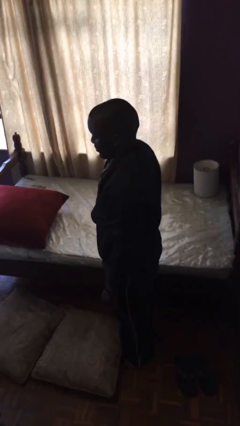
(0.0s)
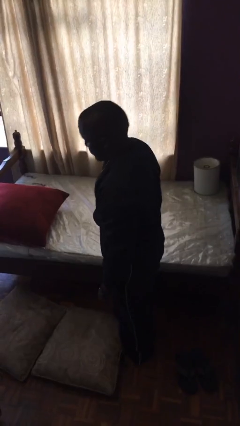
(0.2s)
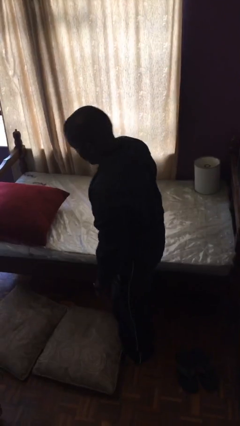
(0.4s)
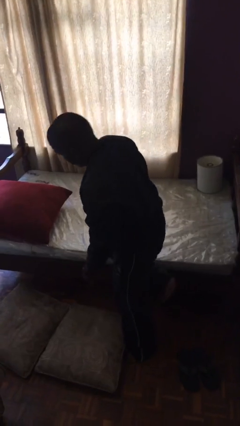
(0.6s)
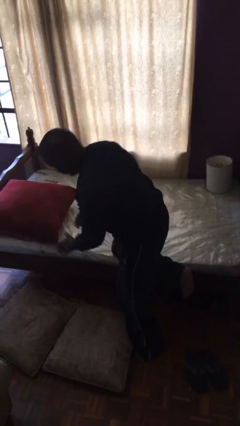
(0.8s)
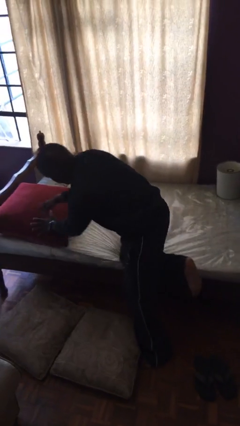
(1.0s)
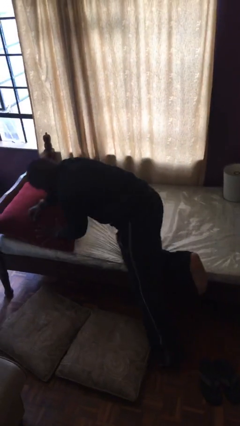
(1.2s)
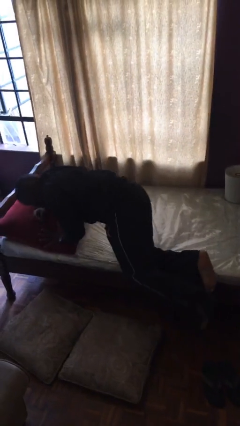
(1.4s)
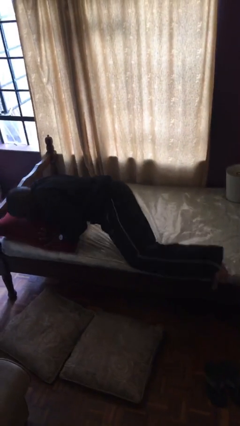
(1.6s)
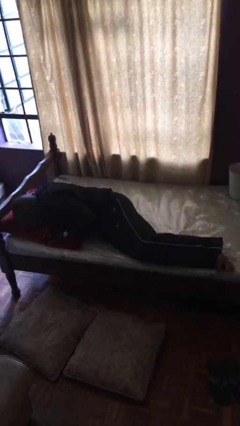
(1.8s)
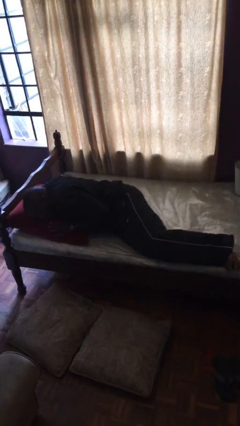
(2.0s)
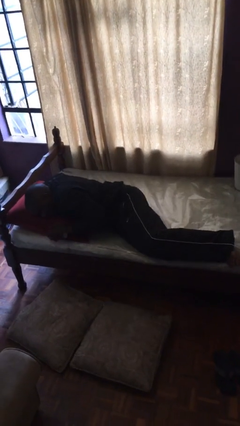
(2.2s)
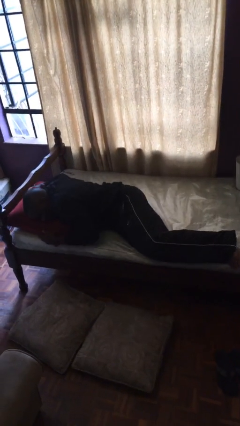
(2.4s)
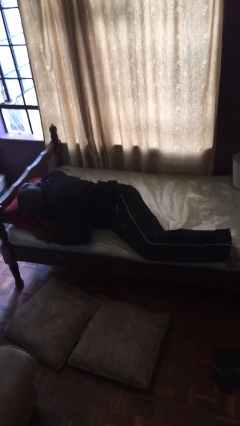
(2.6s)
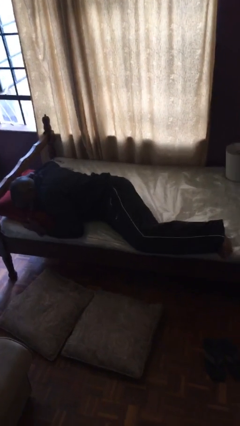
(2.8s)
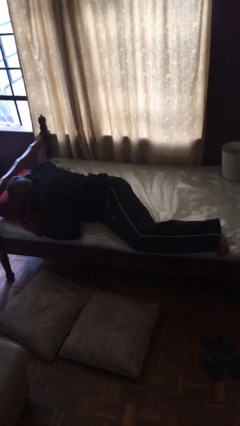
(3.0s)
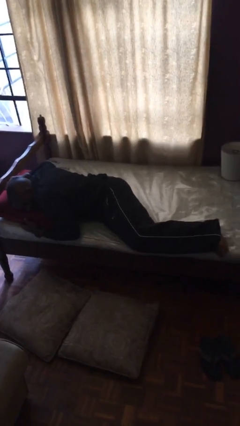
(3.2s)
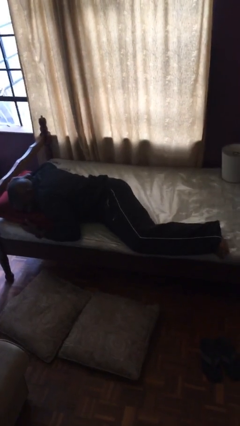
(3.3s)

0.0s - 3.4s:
person lies down on bed

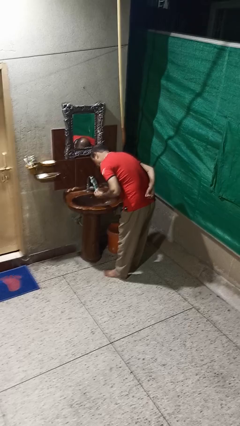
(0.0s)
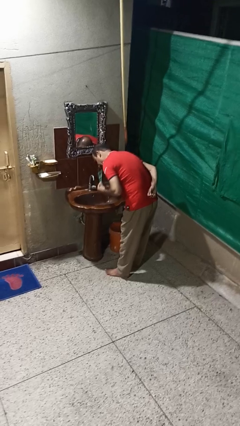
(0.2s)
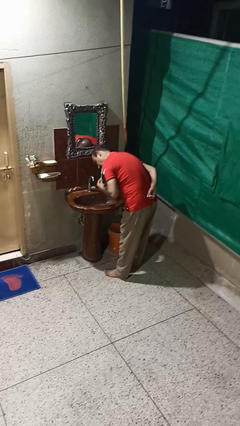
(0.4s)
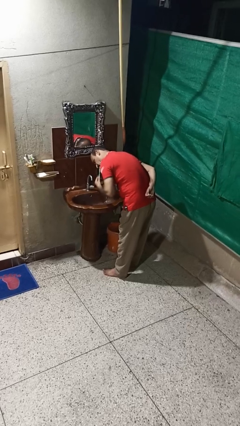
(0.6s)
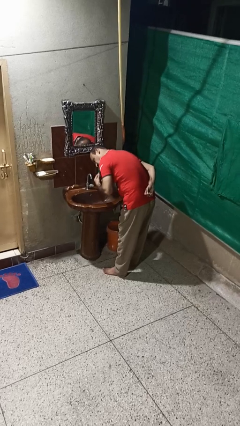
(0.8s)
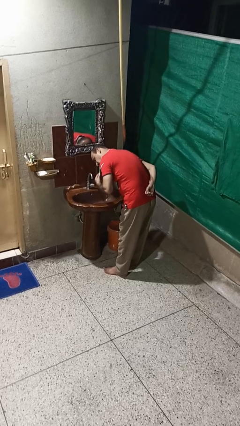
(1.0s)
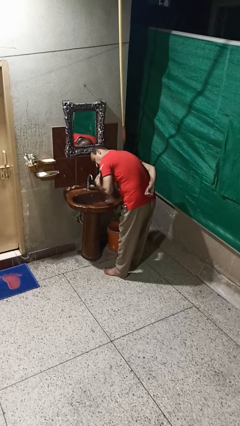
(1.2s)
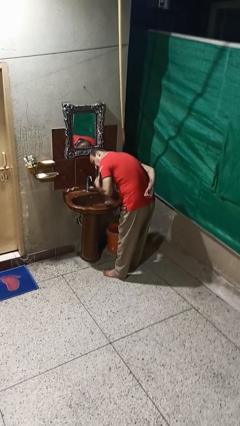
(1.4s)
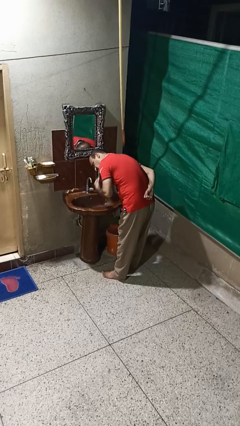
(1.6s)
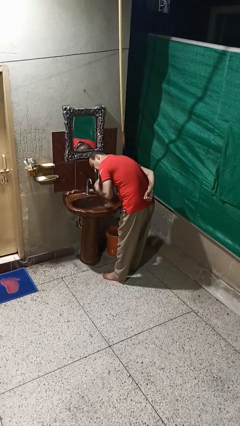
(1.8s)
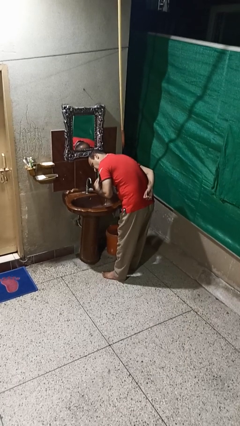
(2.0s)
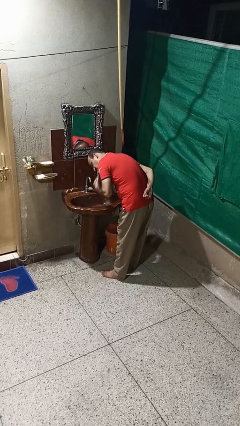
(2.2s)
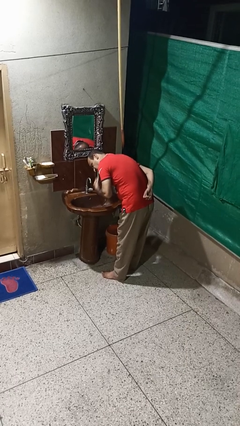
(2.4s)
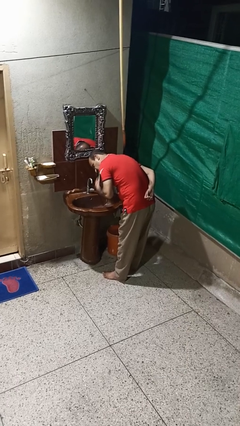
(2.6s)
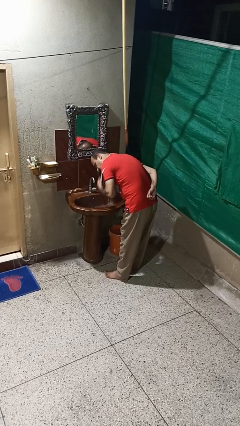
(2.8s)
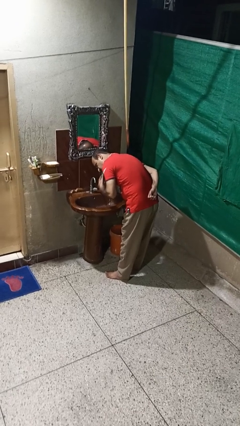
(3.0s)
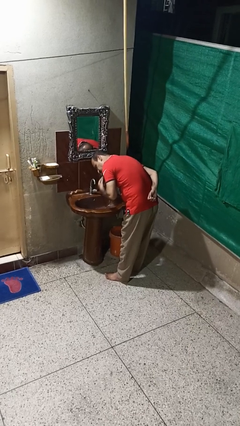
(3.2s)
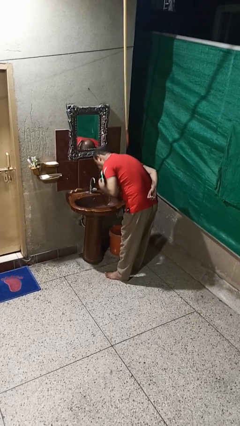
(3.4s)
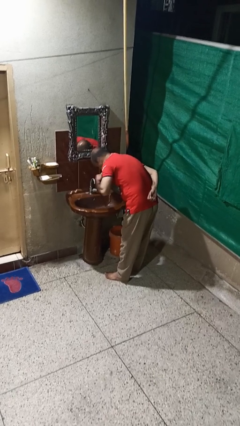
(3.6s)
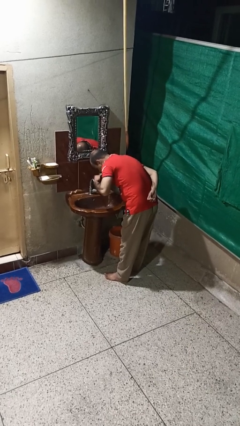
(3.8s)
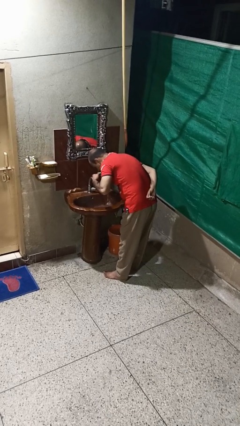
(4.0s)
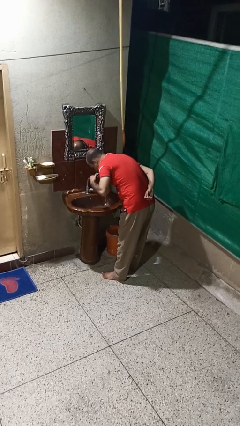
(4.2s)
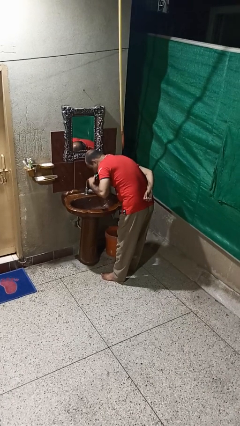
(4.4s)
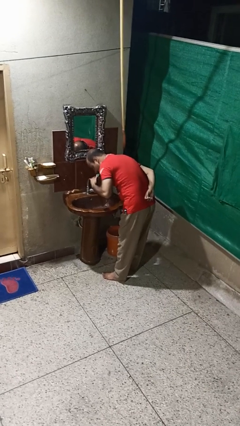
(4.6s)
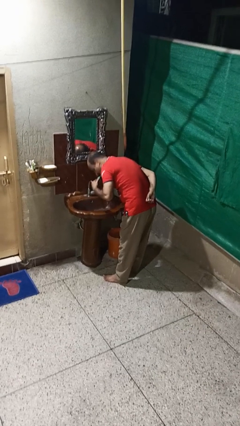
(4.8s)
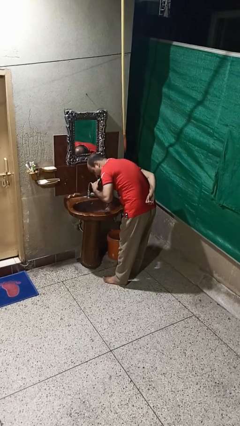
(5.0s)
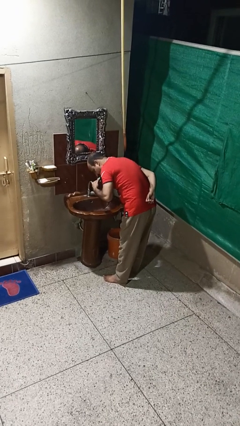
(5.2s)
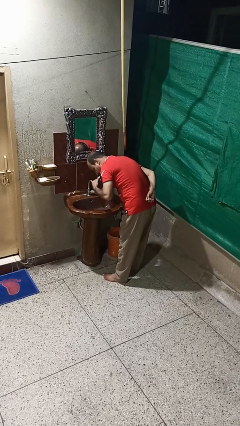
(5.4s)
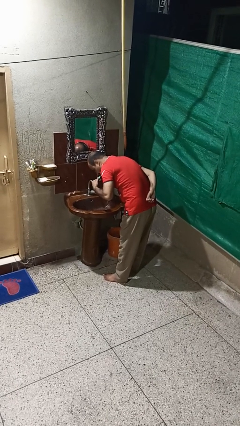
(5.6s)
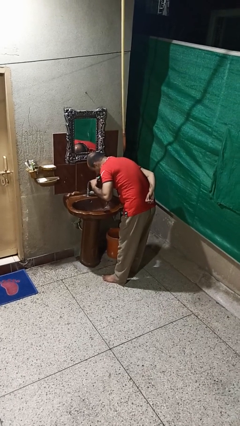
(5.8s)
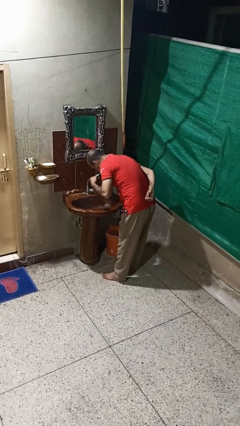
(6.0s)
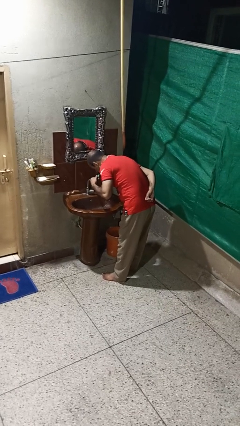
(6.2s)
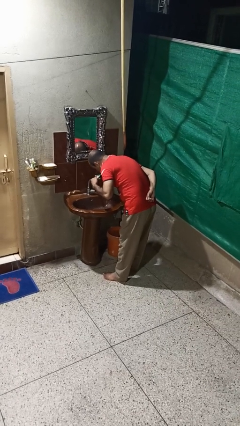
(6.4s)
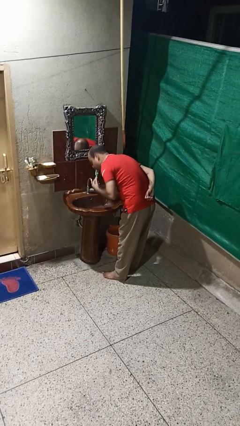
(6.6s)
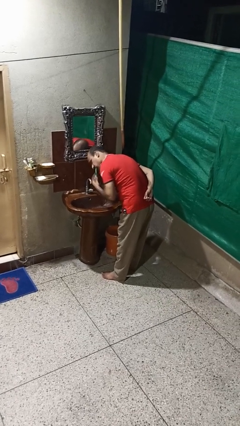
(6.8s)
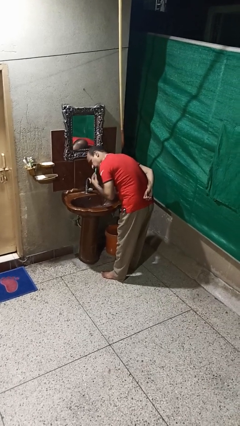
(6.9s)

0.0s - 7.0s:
person brushes teeth

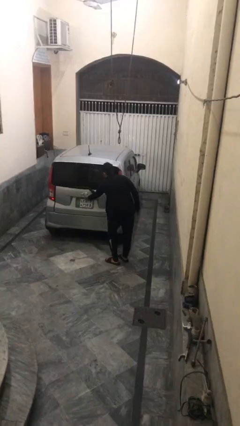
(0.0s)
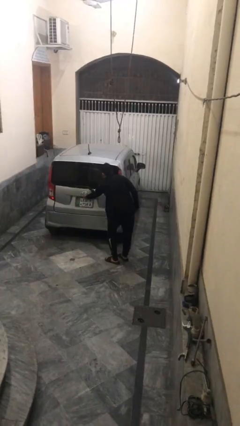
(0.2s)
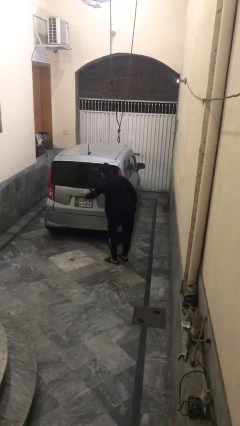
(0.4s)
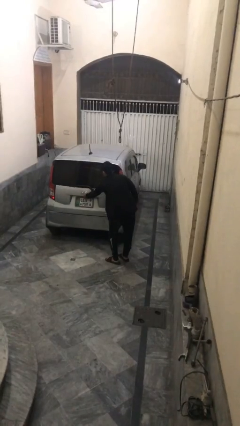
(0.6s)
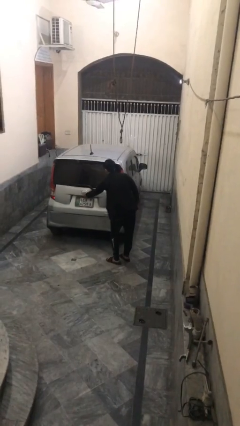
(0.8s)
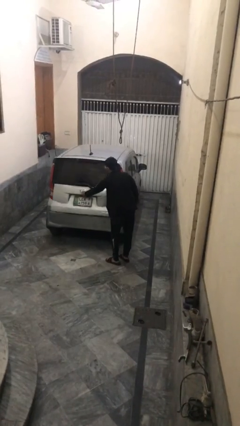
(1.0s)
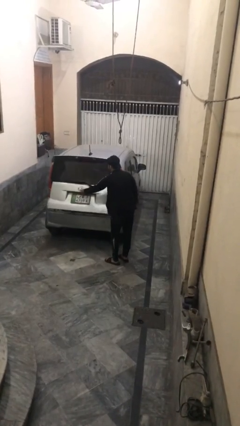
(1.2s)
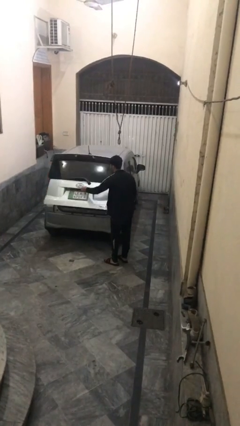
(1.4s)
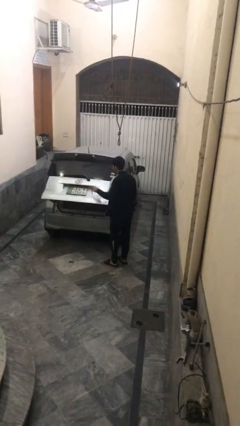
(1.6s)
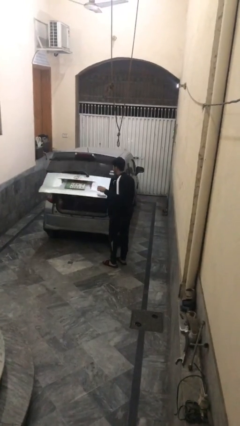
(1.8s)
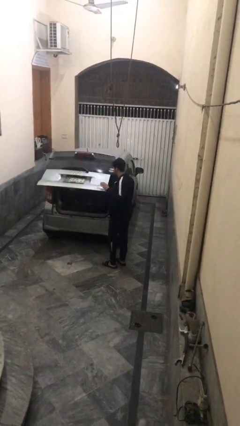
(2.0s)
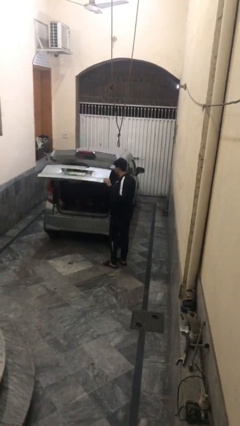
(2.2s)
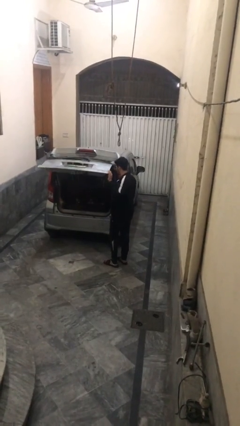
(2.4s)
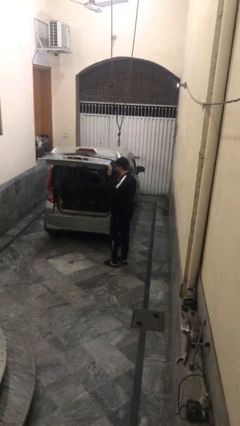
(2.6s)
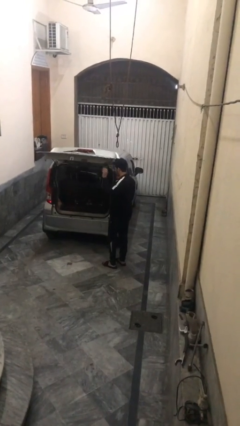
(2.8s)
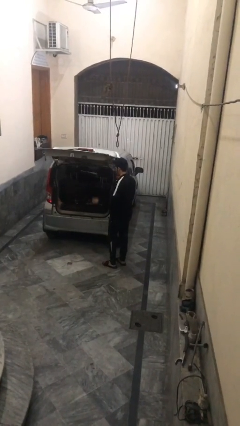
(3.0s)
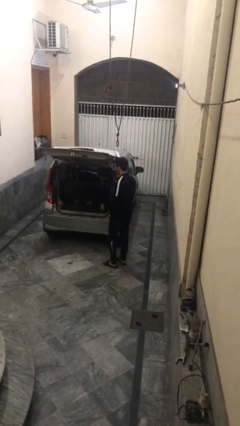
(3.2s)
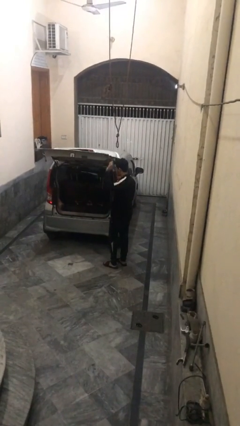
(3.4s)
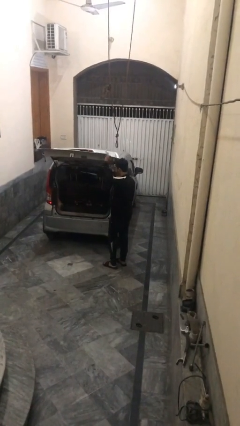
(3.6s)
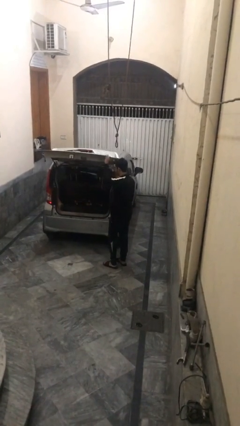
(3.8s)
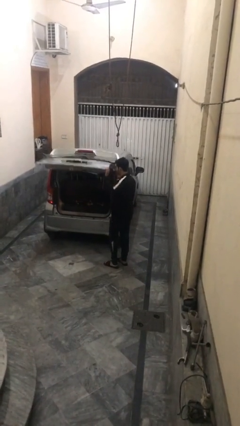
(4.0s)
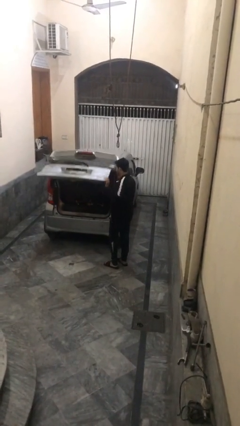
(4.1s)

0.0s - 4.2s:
person opens car trunk

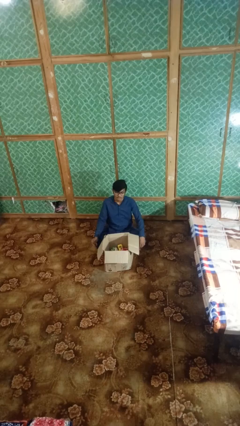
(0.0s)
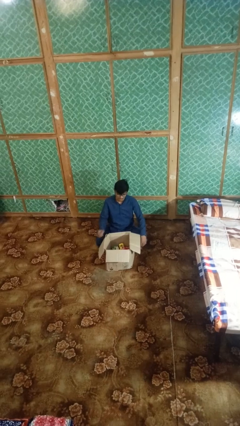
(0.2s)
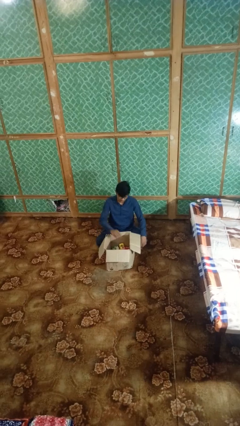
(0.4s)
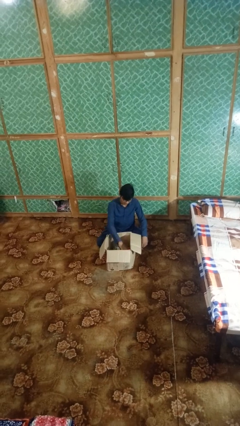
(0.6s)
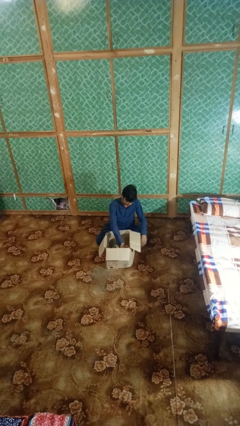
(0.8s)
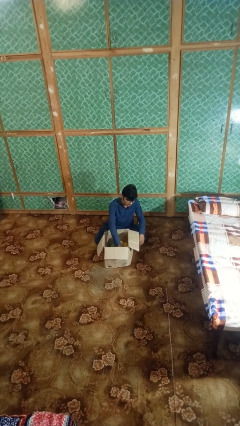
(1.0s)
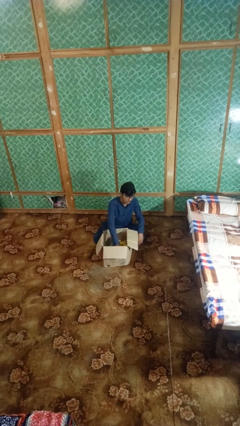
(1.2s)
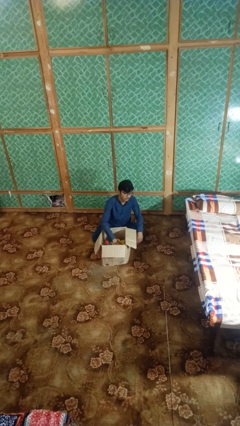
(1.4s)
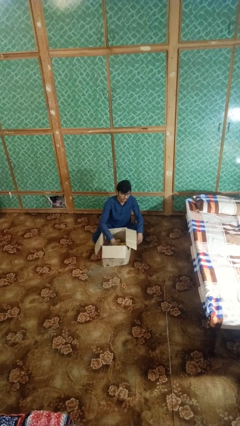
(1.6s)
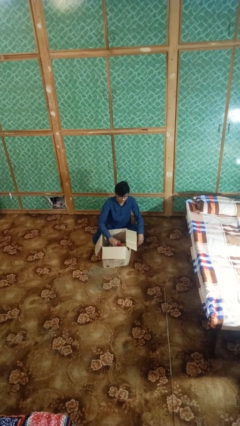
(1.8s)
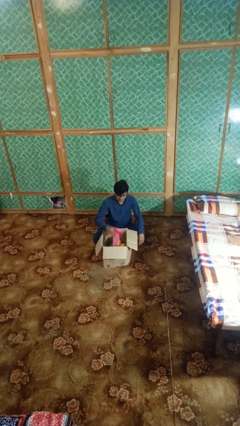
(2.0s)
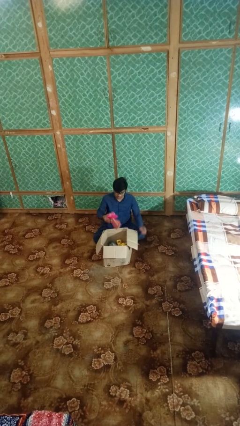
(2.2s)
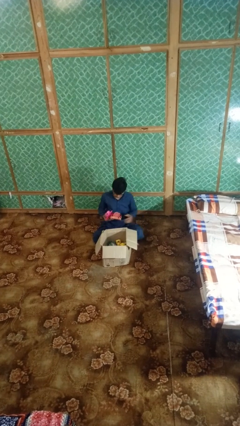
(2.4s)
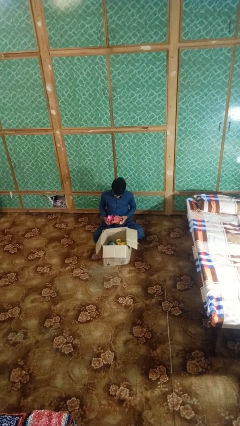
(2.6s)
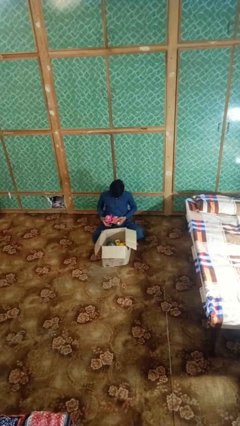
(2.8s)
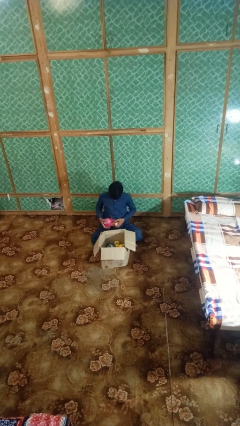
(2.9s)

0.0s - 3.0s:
person takes object from box

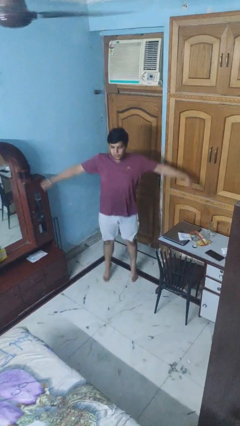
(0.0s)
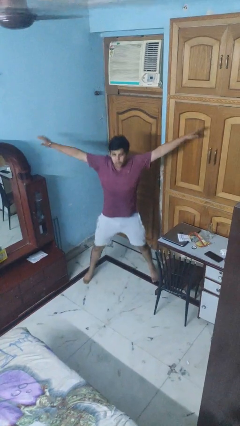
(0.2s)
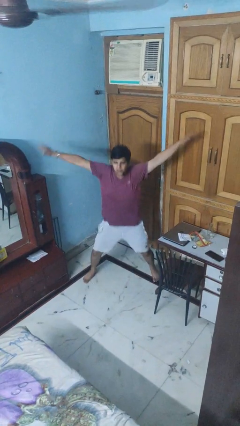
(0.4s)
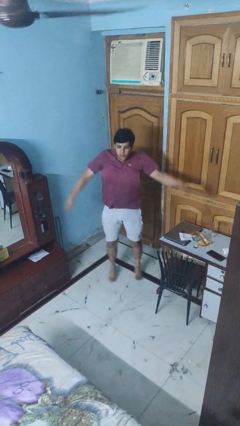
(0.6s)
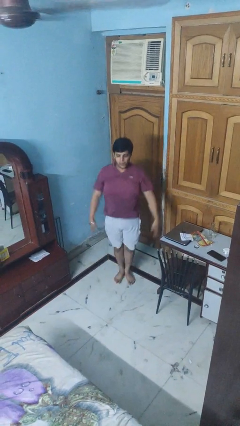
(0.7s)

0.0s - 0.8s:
person exercises with jumping jacks
